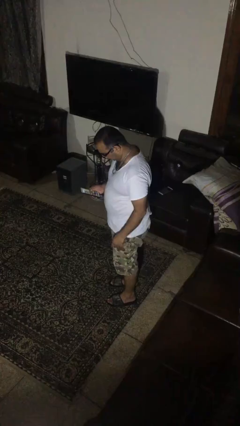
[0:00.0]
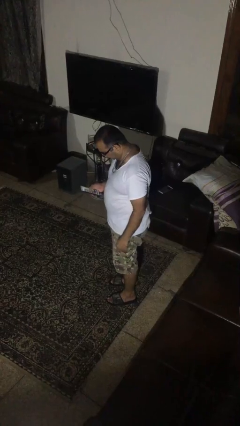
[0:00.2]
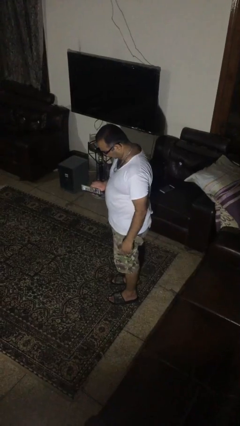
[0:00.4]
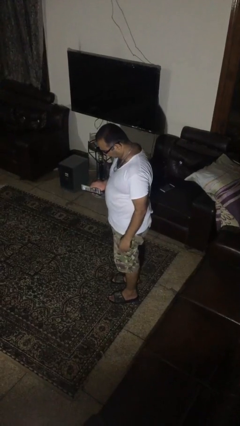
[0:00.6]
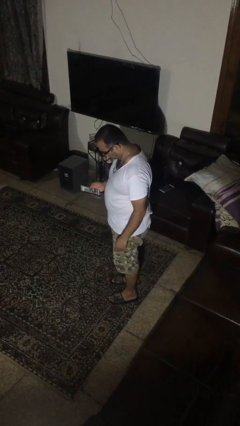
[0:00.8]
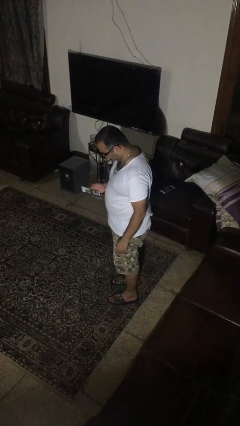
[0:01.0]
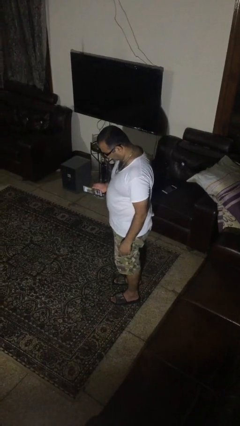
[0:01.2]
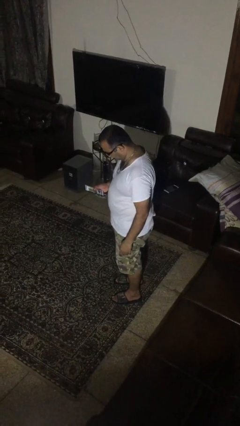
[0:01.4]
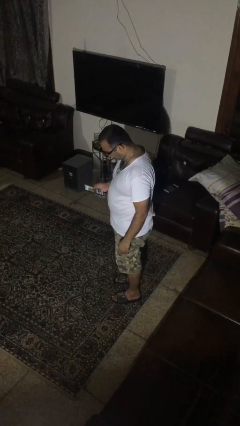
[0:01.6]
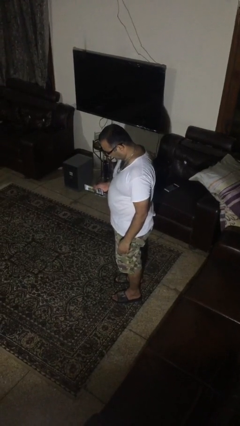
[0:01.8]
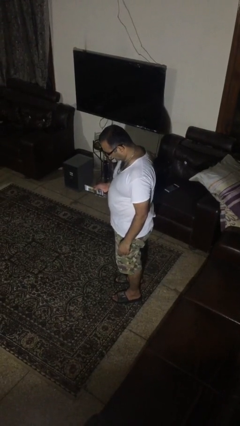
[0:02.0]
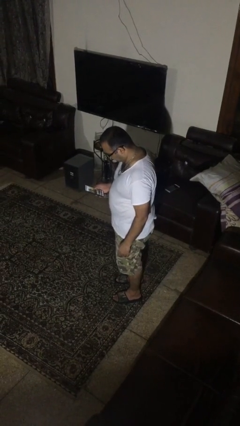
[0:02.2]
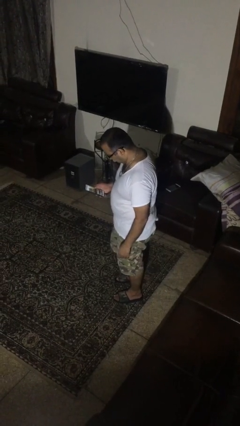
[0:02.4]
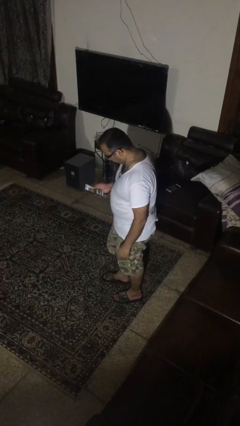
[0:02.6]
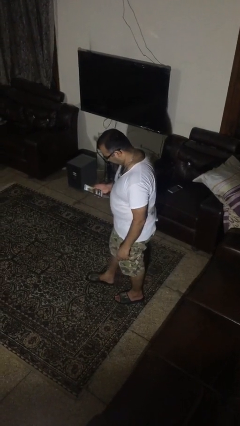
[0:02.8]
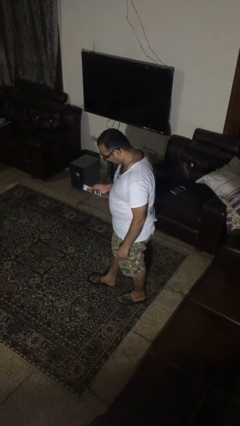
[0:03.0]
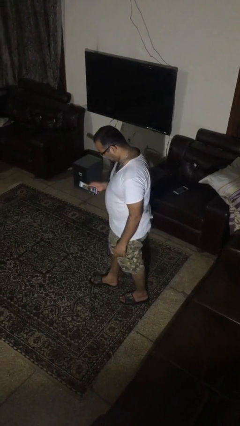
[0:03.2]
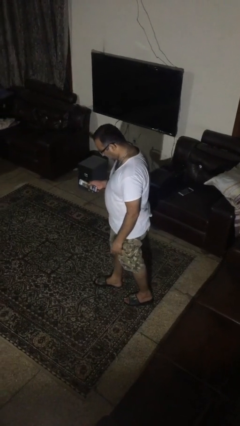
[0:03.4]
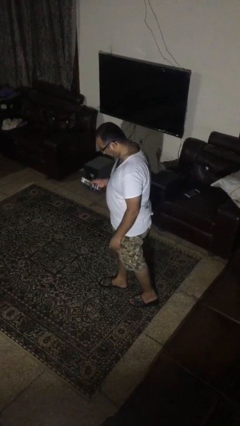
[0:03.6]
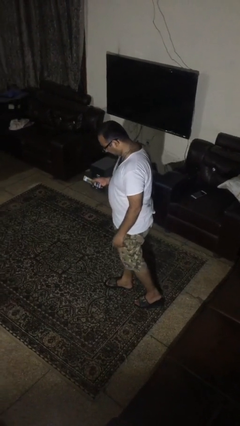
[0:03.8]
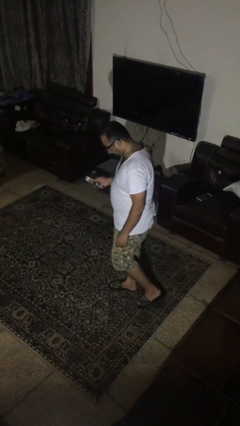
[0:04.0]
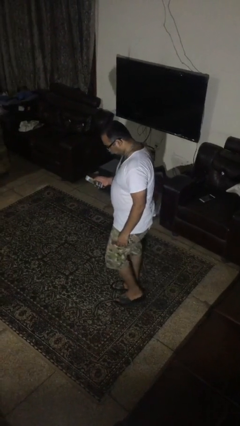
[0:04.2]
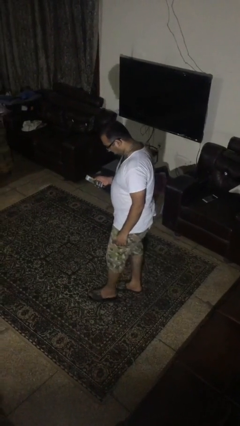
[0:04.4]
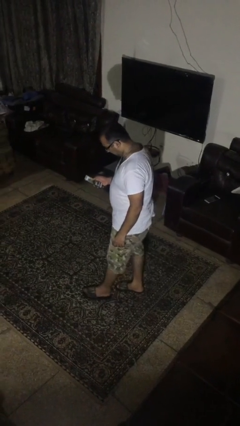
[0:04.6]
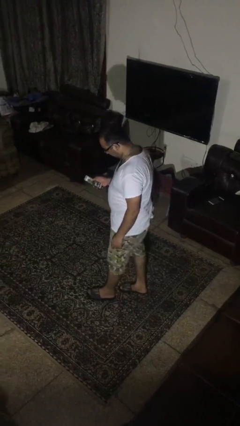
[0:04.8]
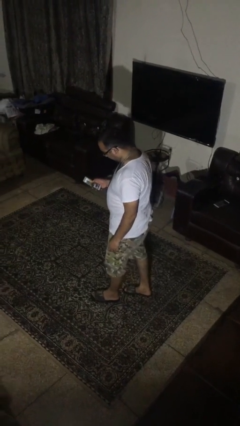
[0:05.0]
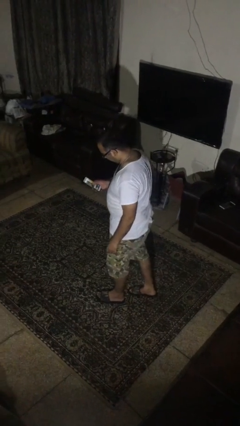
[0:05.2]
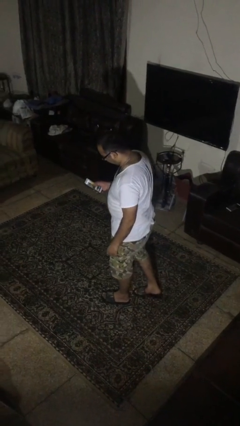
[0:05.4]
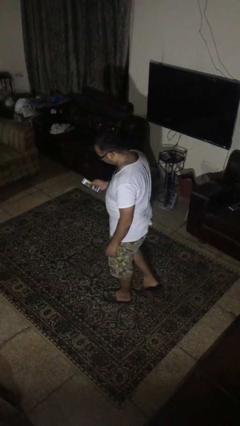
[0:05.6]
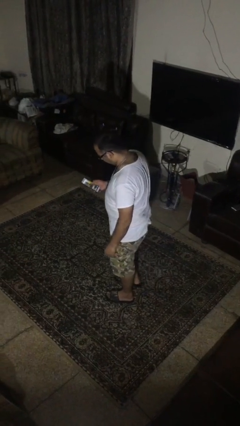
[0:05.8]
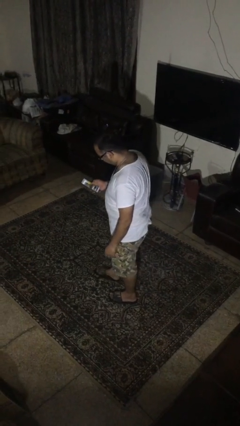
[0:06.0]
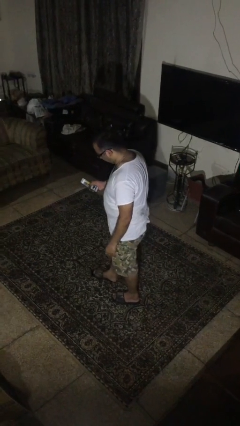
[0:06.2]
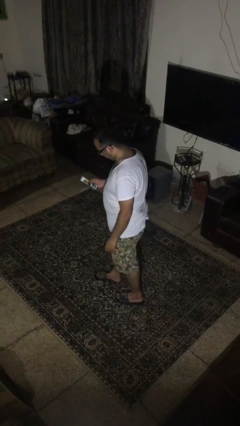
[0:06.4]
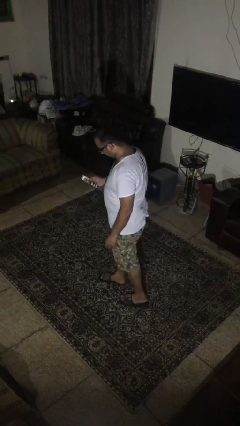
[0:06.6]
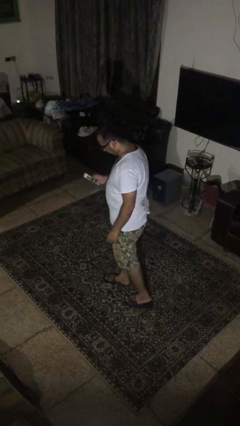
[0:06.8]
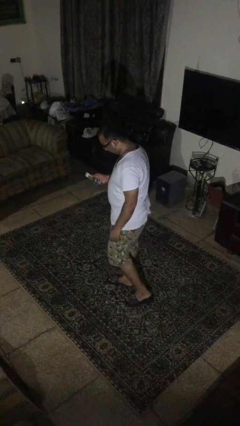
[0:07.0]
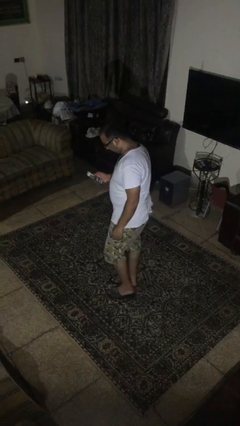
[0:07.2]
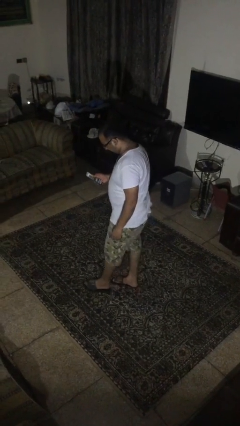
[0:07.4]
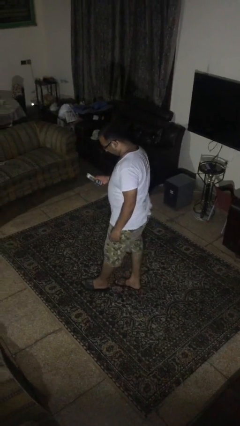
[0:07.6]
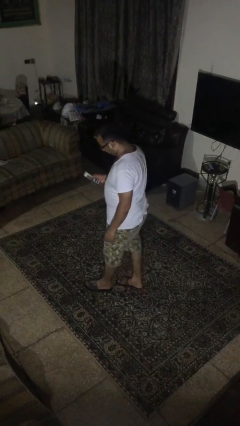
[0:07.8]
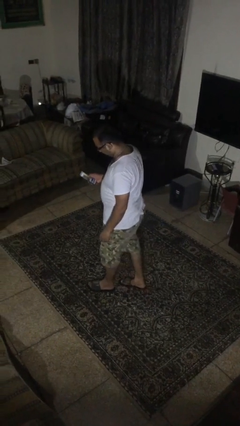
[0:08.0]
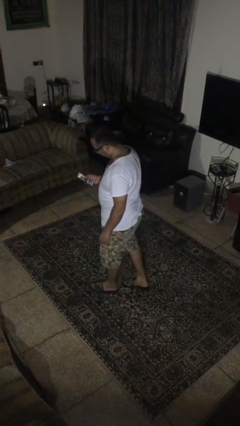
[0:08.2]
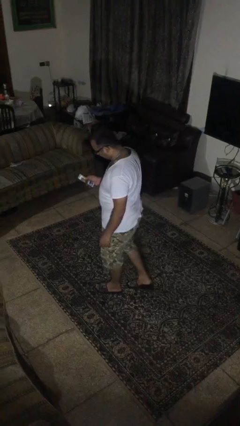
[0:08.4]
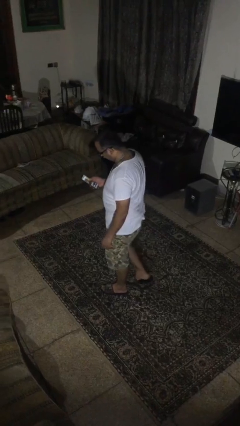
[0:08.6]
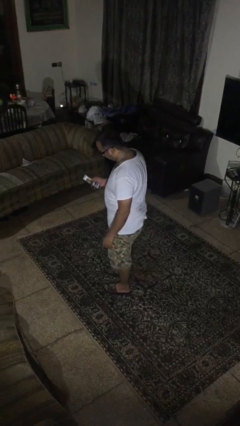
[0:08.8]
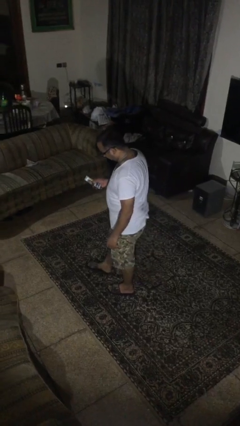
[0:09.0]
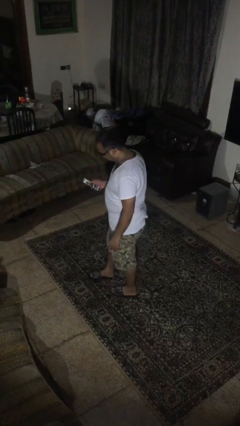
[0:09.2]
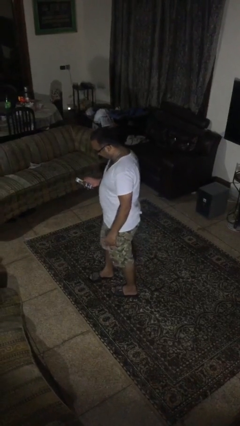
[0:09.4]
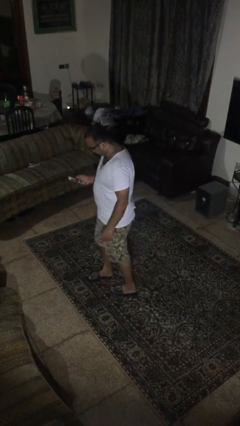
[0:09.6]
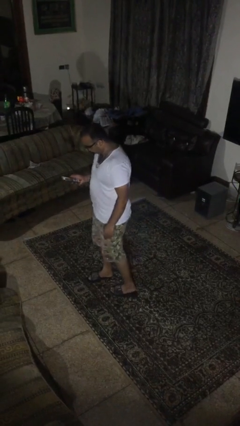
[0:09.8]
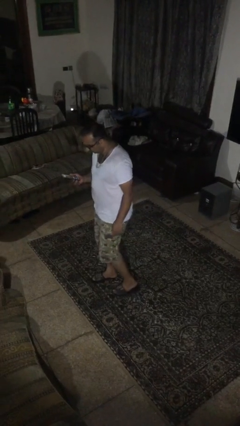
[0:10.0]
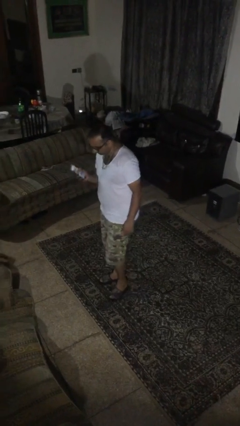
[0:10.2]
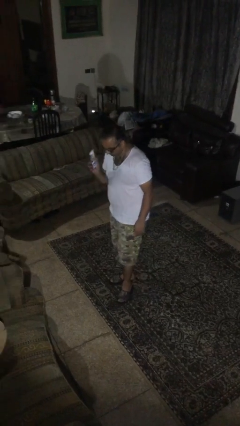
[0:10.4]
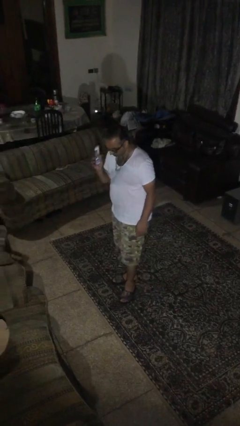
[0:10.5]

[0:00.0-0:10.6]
person texts on phone

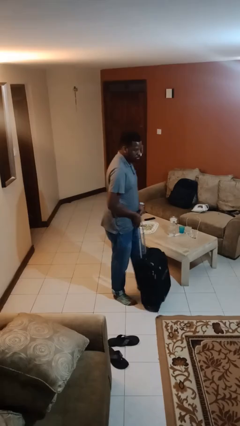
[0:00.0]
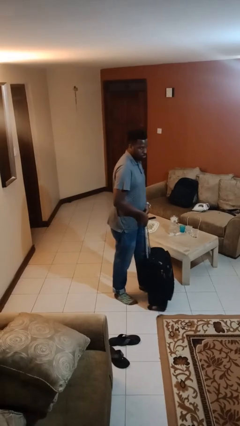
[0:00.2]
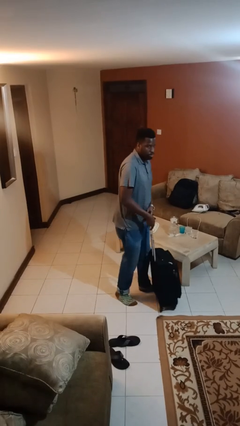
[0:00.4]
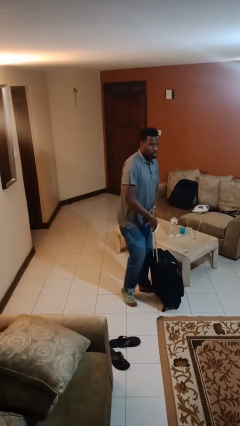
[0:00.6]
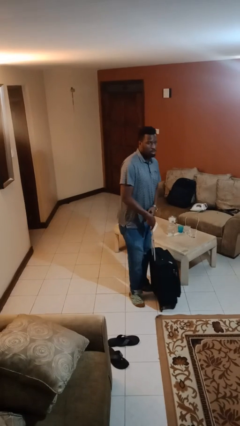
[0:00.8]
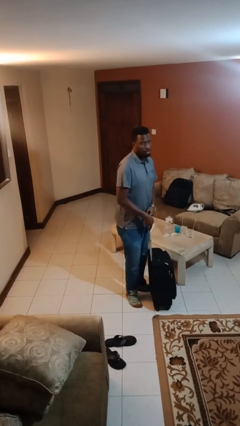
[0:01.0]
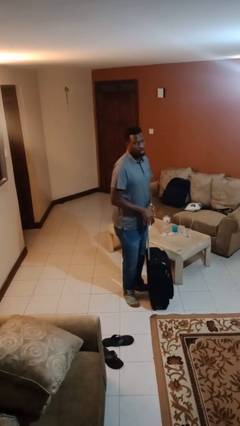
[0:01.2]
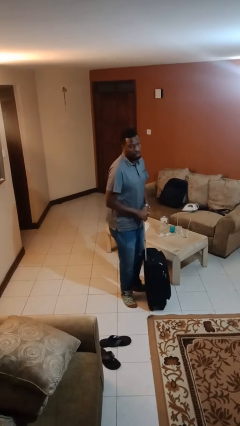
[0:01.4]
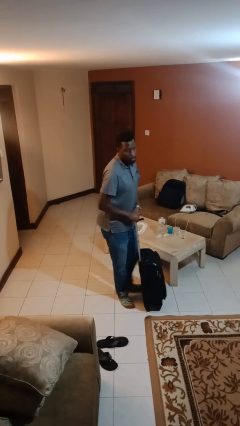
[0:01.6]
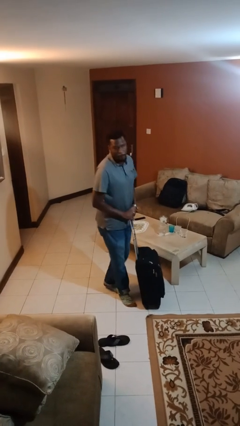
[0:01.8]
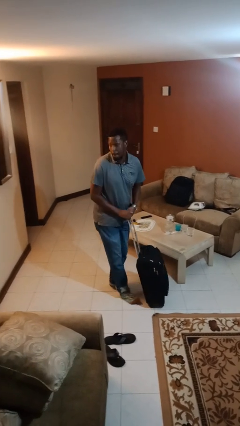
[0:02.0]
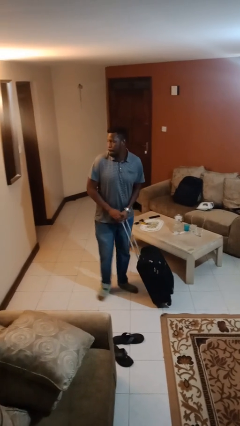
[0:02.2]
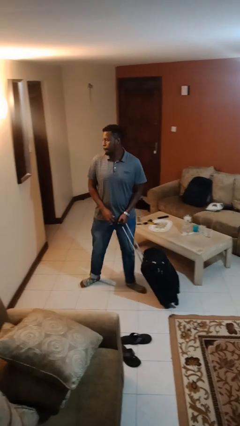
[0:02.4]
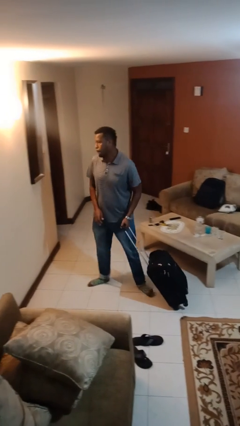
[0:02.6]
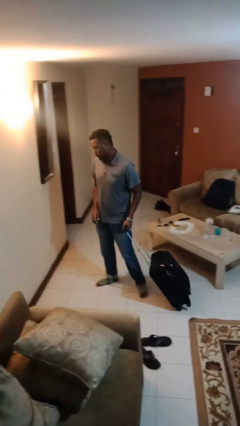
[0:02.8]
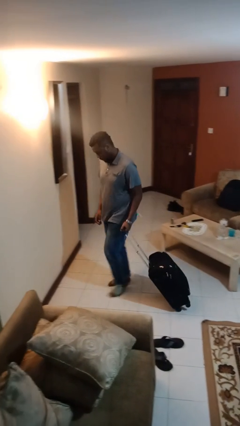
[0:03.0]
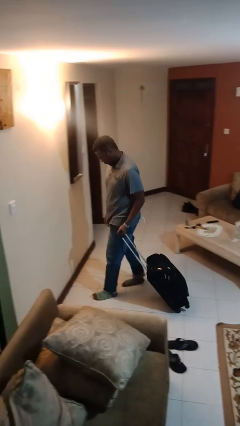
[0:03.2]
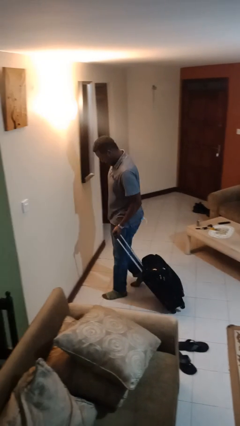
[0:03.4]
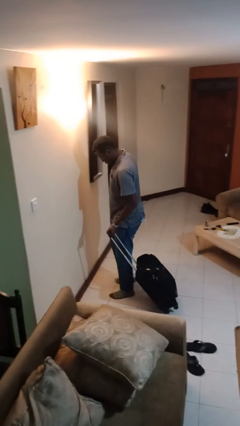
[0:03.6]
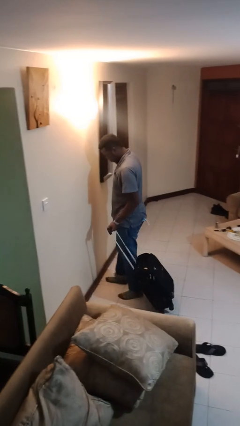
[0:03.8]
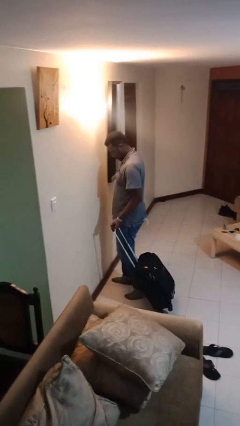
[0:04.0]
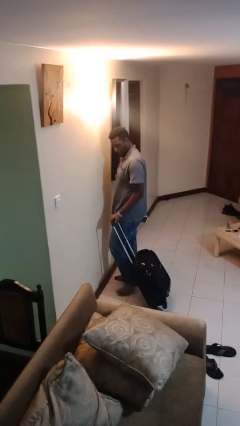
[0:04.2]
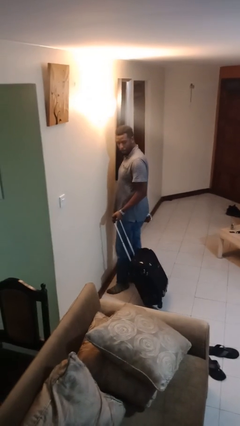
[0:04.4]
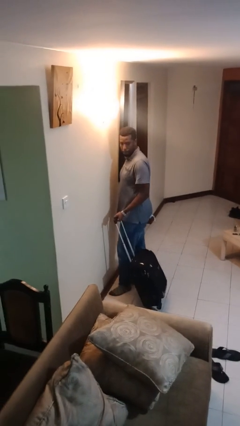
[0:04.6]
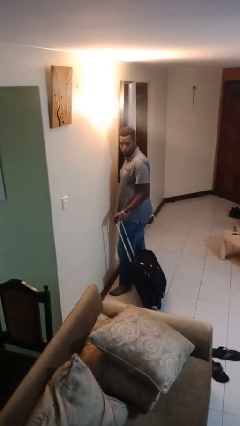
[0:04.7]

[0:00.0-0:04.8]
person pulls wheeled cart

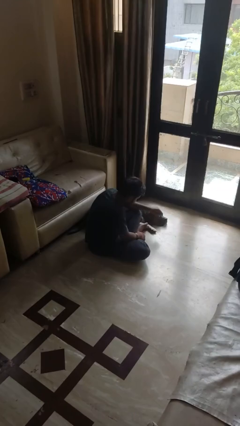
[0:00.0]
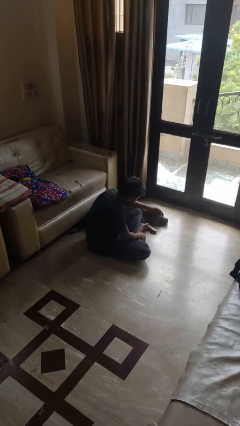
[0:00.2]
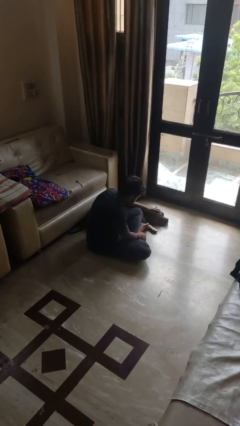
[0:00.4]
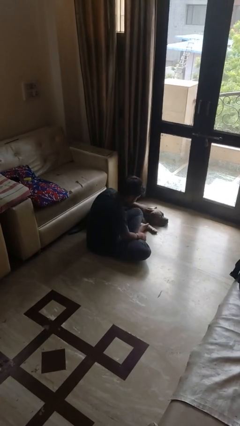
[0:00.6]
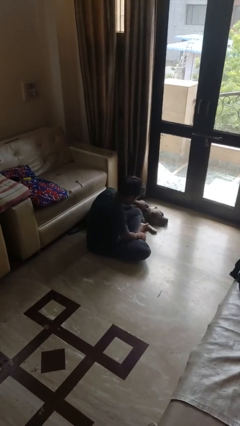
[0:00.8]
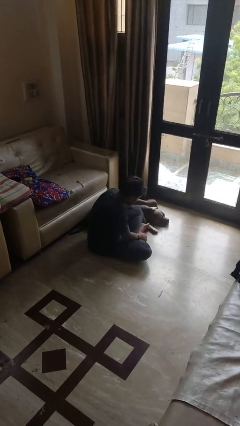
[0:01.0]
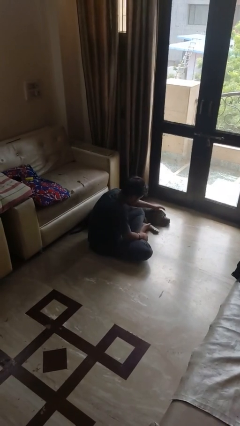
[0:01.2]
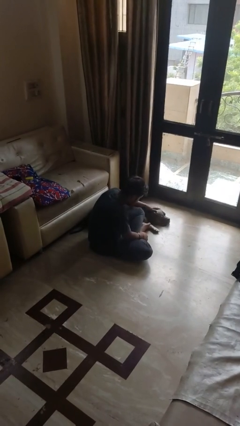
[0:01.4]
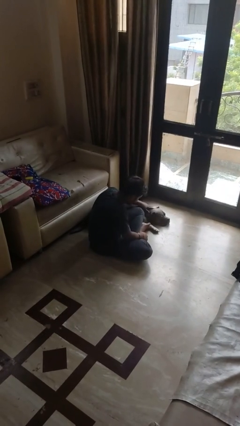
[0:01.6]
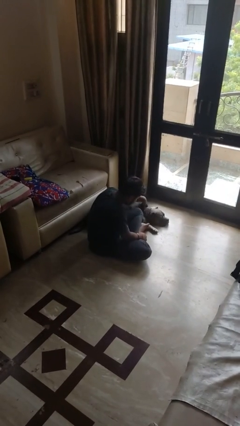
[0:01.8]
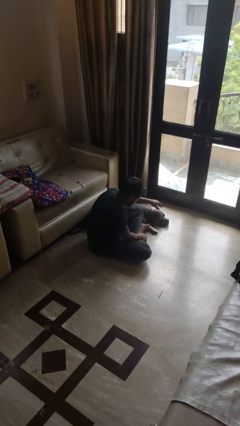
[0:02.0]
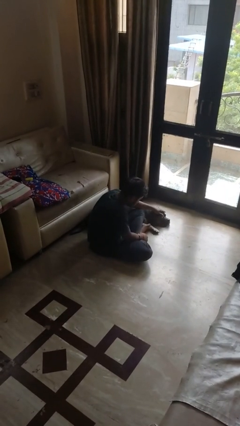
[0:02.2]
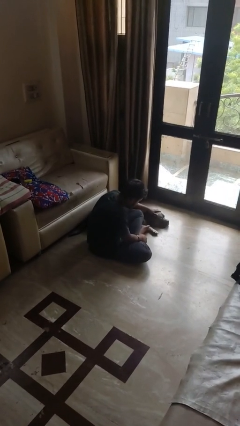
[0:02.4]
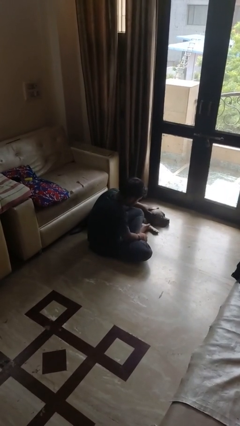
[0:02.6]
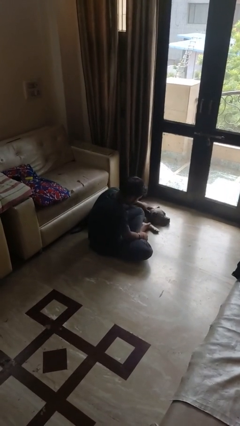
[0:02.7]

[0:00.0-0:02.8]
person pets dog
